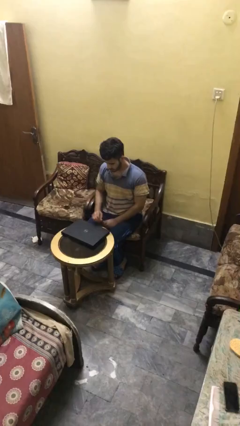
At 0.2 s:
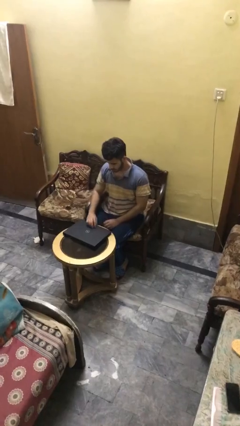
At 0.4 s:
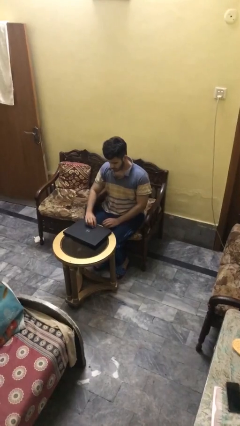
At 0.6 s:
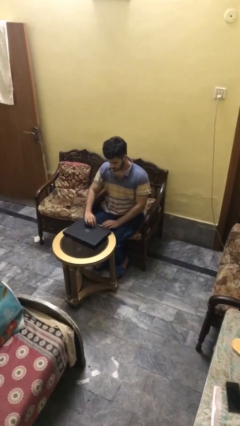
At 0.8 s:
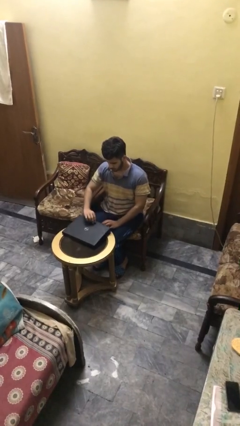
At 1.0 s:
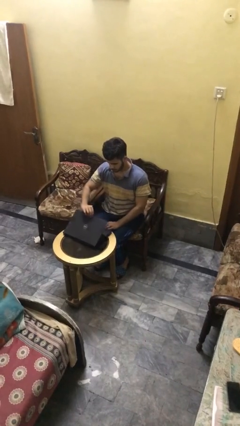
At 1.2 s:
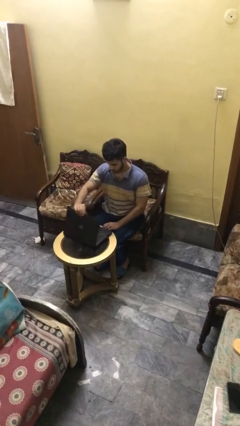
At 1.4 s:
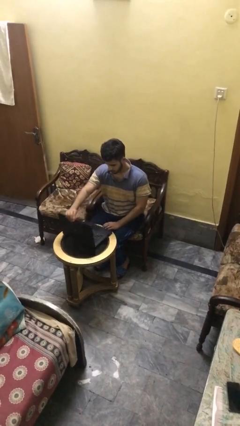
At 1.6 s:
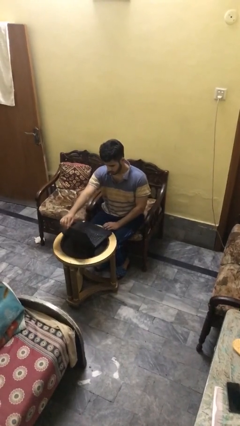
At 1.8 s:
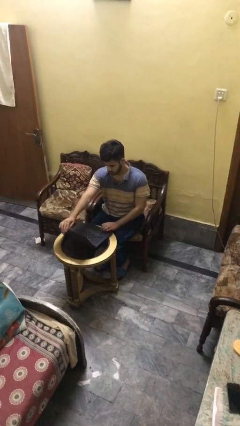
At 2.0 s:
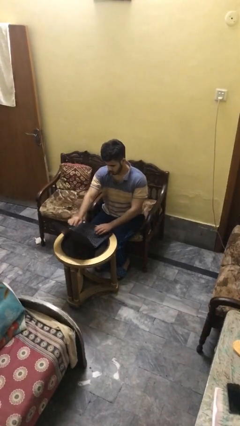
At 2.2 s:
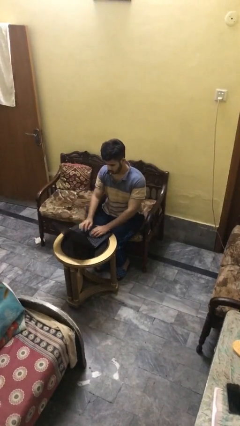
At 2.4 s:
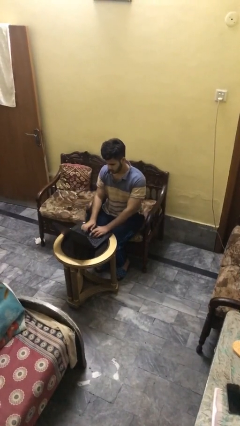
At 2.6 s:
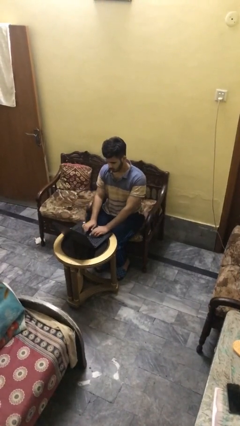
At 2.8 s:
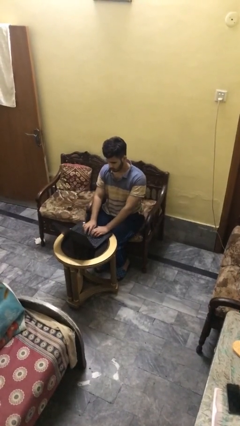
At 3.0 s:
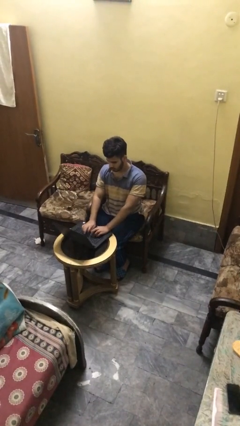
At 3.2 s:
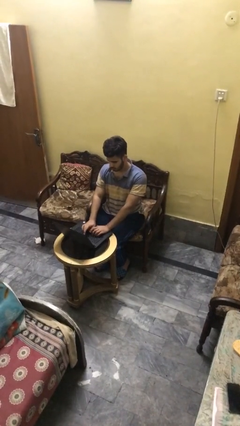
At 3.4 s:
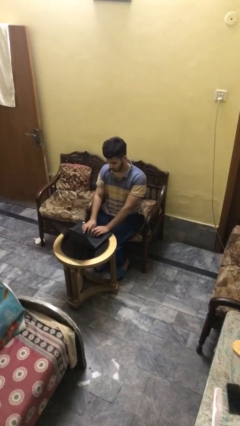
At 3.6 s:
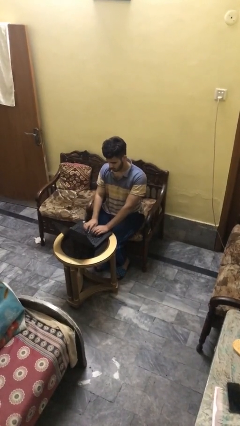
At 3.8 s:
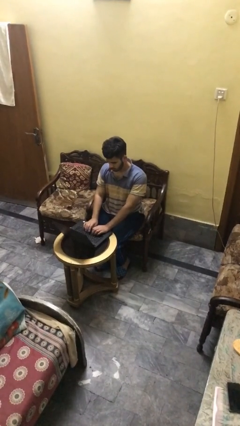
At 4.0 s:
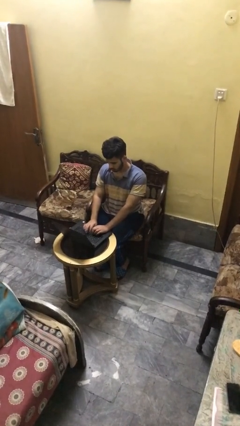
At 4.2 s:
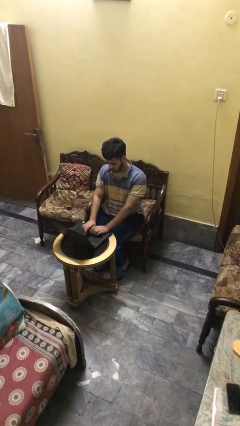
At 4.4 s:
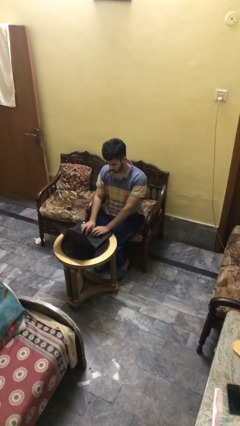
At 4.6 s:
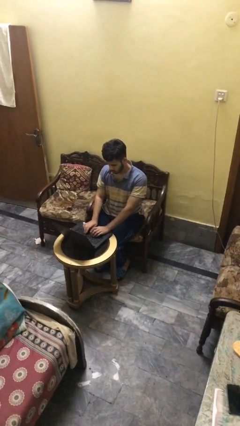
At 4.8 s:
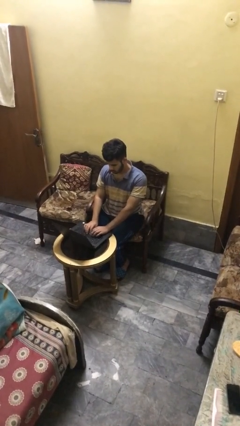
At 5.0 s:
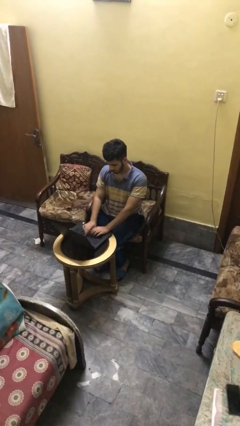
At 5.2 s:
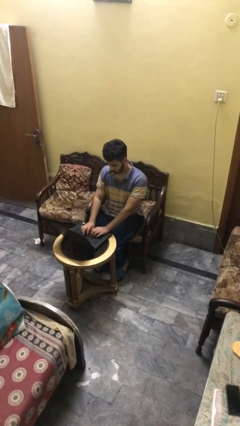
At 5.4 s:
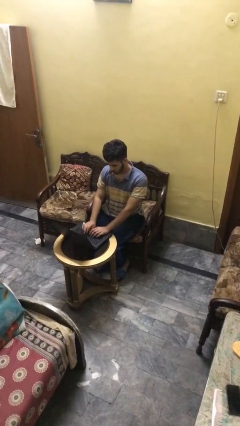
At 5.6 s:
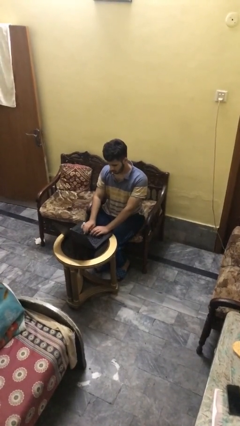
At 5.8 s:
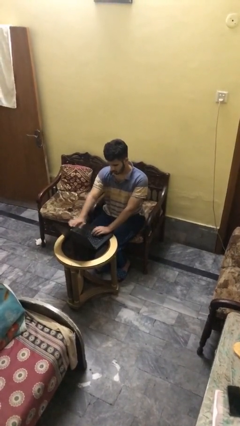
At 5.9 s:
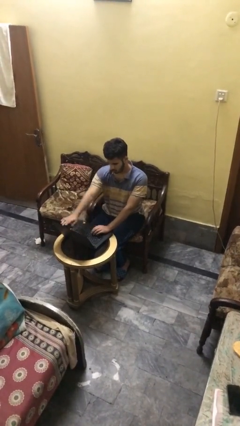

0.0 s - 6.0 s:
person interacts with laptop

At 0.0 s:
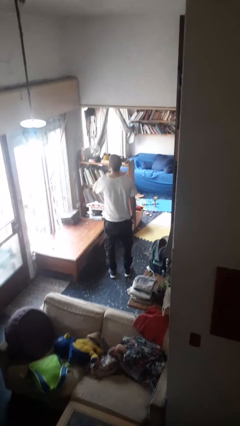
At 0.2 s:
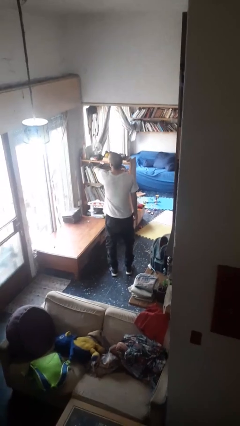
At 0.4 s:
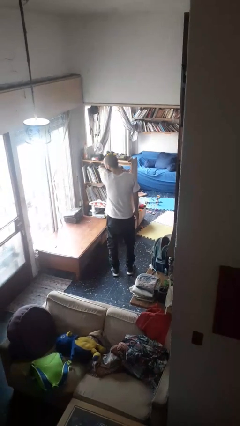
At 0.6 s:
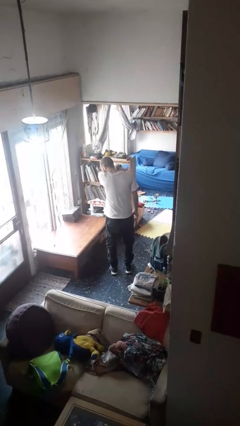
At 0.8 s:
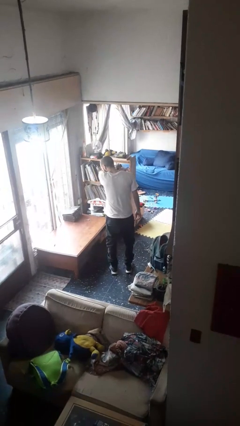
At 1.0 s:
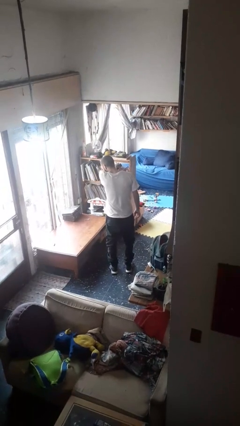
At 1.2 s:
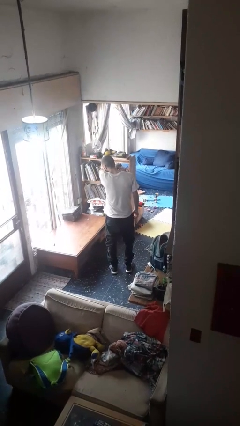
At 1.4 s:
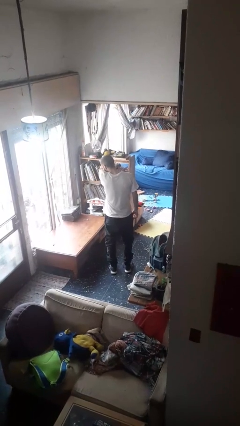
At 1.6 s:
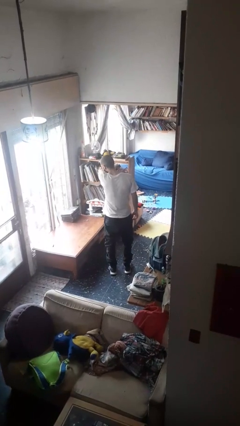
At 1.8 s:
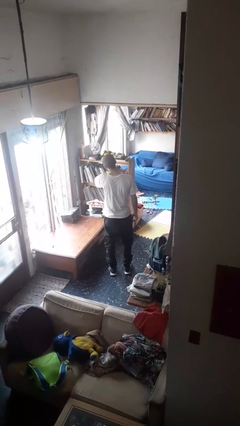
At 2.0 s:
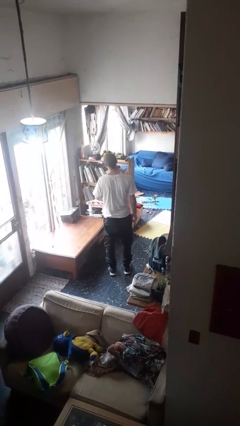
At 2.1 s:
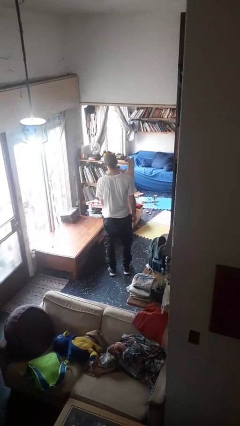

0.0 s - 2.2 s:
person sneezes into arm

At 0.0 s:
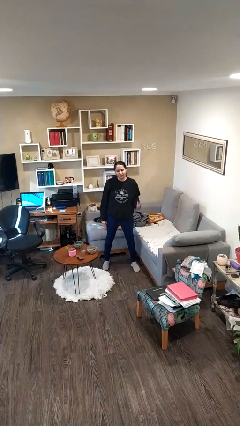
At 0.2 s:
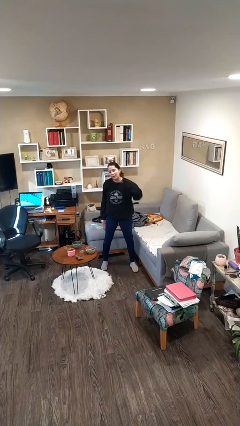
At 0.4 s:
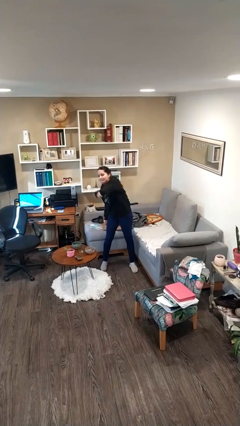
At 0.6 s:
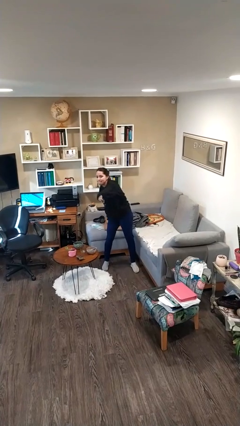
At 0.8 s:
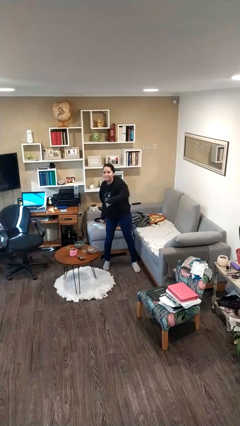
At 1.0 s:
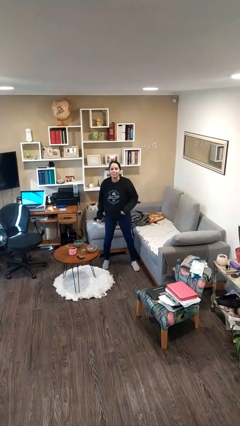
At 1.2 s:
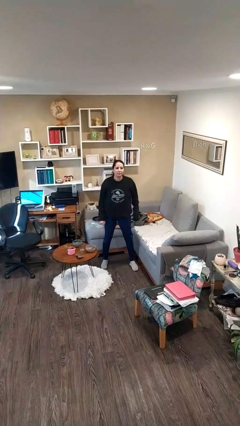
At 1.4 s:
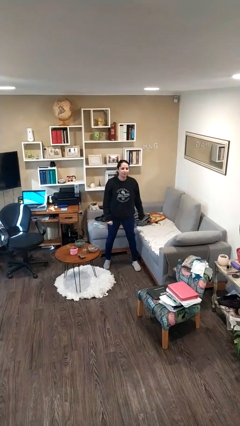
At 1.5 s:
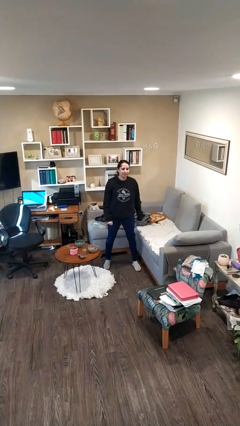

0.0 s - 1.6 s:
person punches

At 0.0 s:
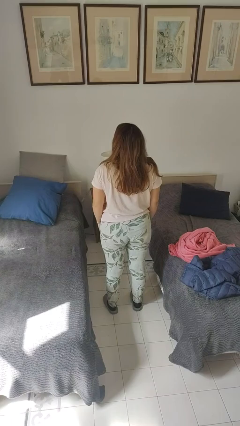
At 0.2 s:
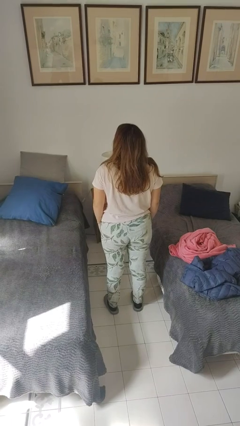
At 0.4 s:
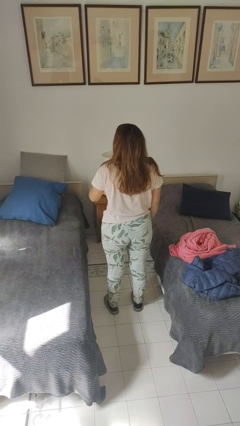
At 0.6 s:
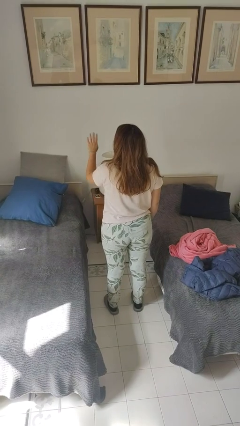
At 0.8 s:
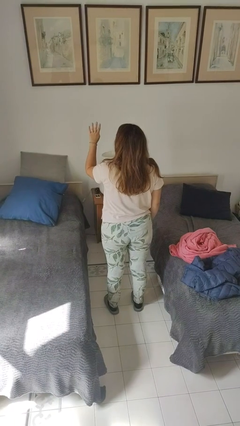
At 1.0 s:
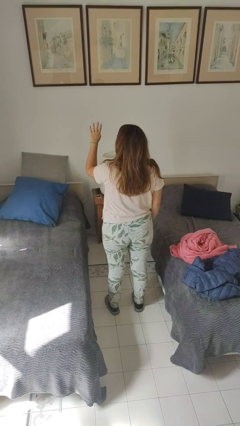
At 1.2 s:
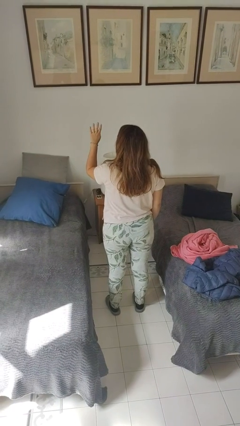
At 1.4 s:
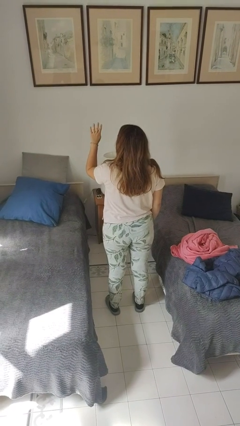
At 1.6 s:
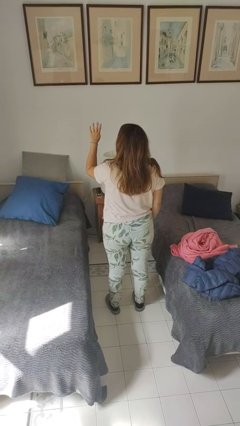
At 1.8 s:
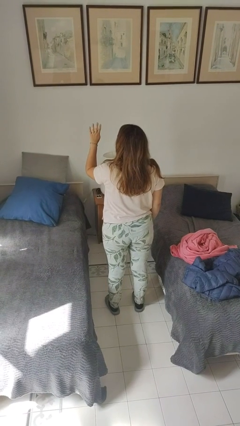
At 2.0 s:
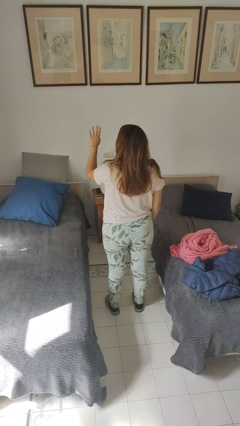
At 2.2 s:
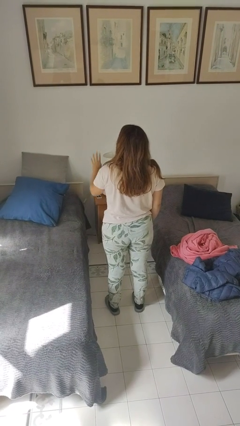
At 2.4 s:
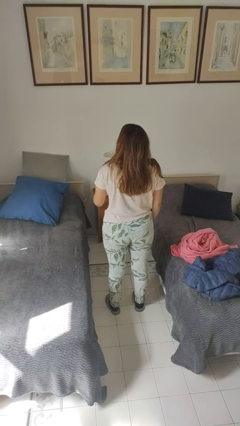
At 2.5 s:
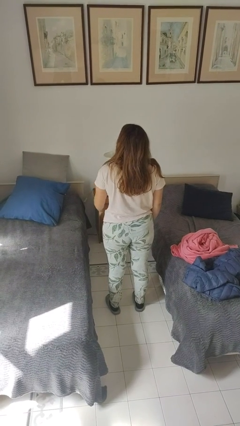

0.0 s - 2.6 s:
person gestures number four

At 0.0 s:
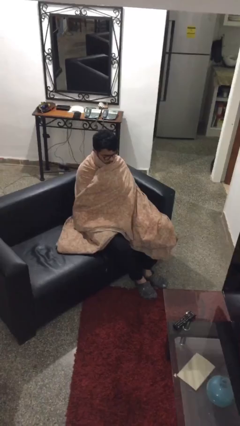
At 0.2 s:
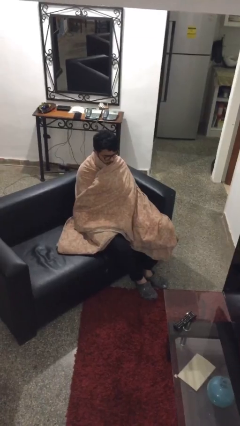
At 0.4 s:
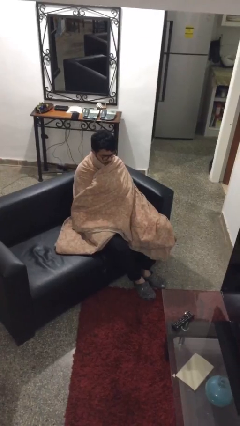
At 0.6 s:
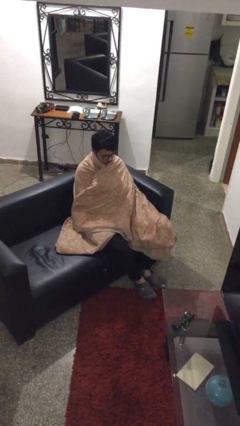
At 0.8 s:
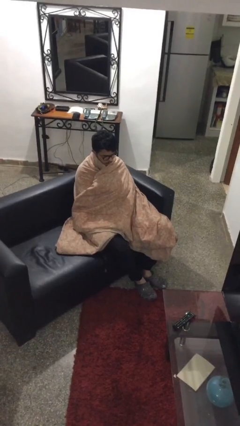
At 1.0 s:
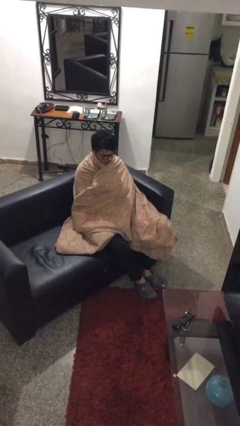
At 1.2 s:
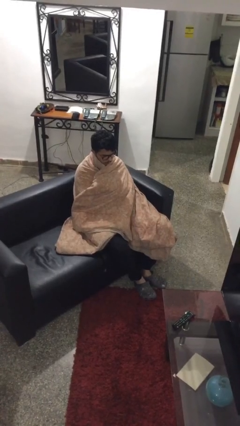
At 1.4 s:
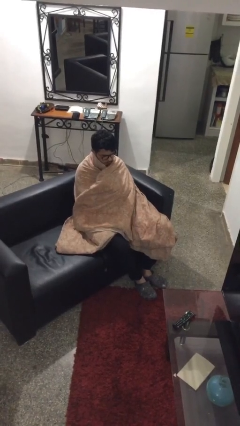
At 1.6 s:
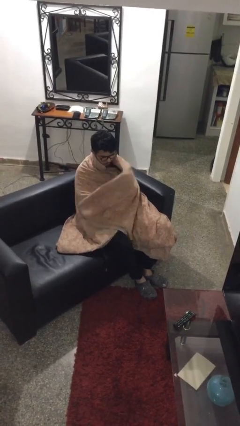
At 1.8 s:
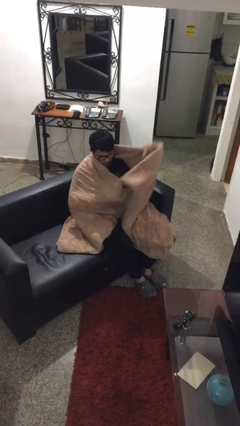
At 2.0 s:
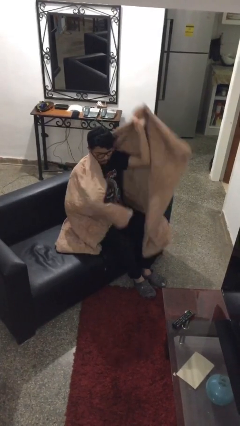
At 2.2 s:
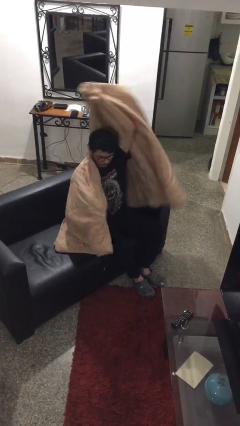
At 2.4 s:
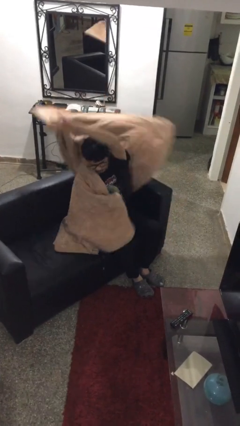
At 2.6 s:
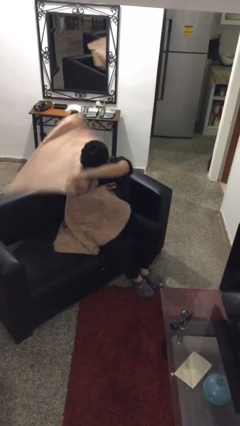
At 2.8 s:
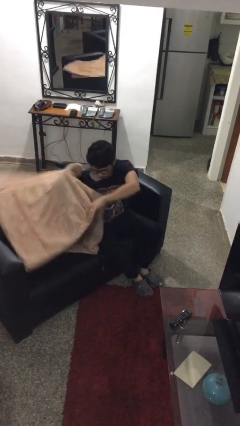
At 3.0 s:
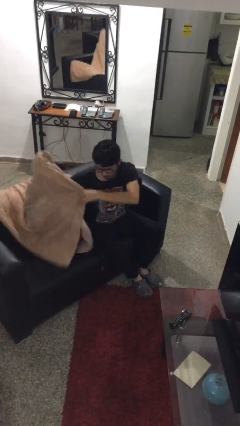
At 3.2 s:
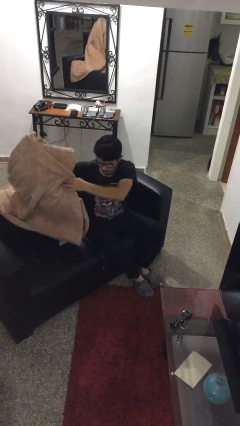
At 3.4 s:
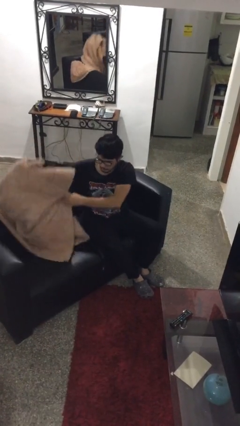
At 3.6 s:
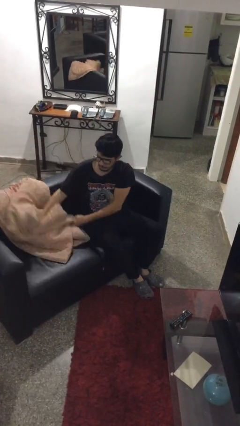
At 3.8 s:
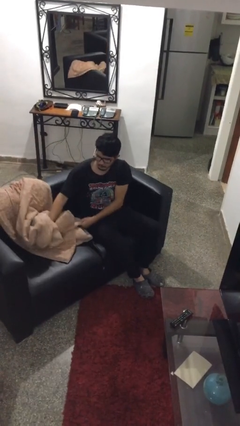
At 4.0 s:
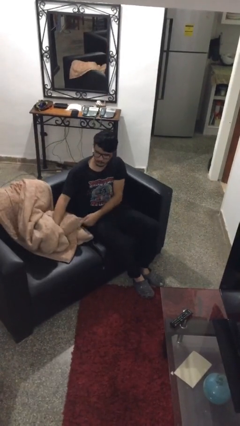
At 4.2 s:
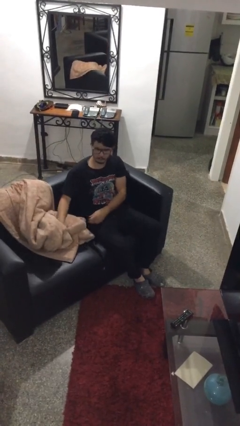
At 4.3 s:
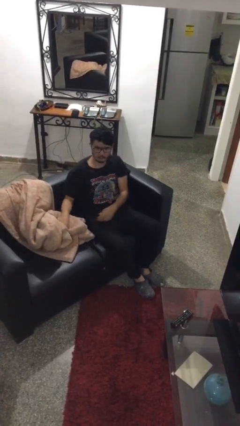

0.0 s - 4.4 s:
person uncovers with blanket

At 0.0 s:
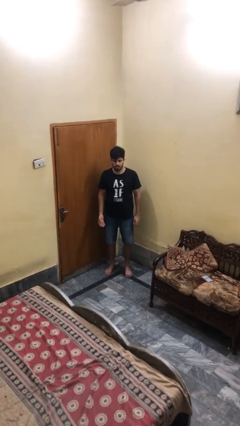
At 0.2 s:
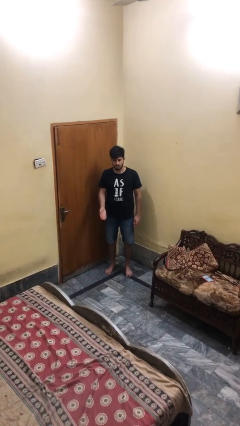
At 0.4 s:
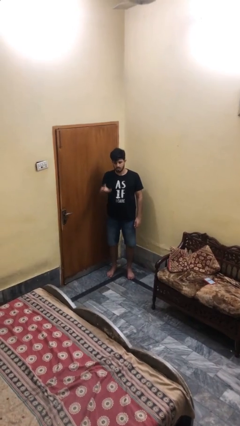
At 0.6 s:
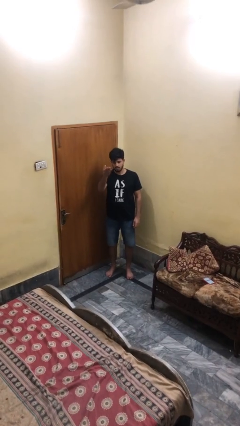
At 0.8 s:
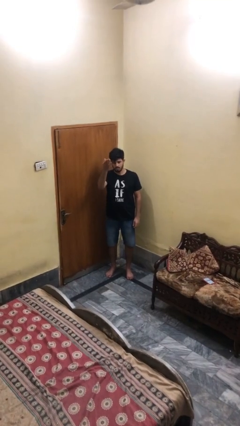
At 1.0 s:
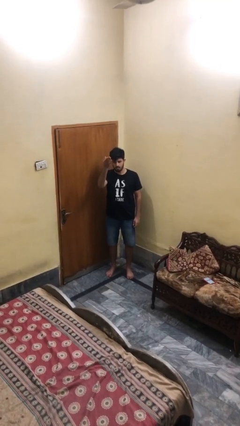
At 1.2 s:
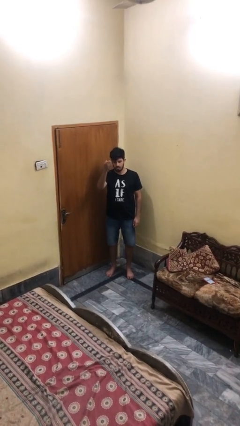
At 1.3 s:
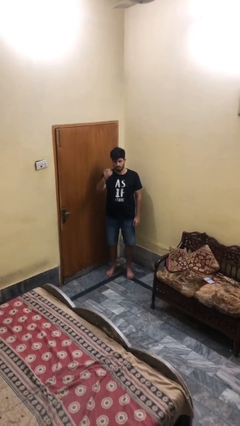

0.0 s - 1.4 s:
person gestures swipe up
